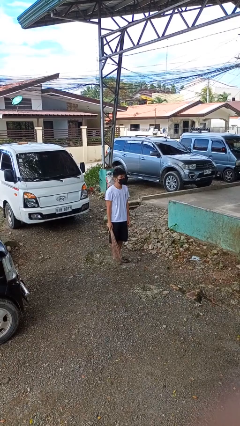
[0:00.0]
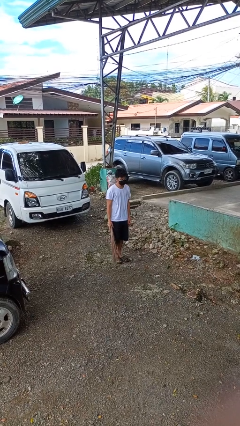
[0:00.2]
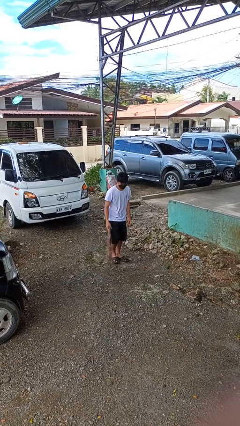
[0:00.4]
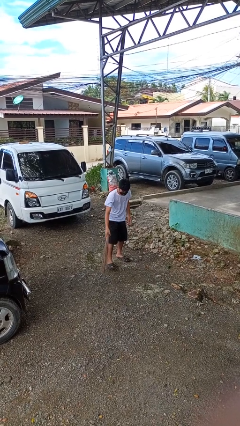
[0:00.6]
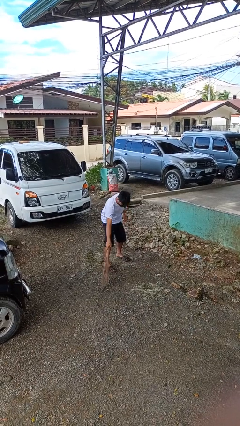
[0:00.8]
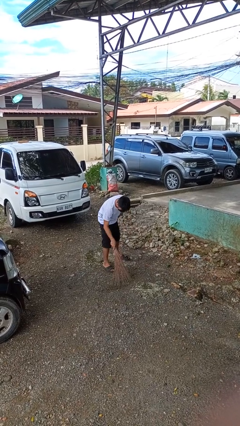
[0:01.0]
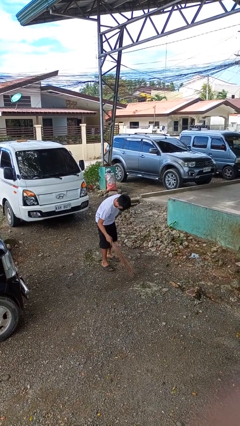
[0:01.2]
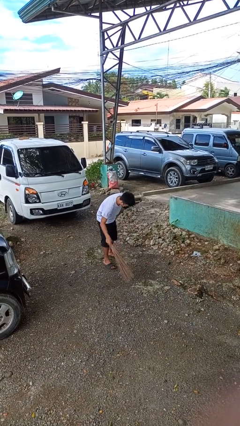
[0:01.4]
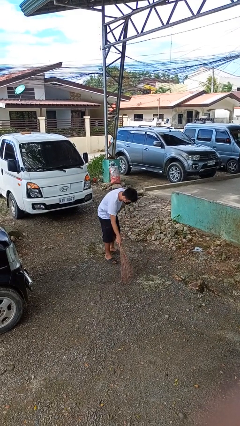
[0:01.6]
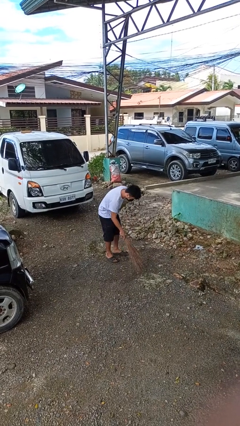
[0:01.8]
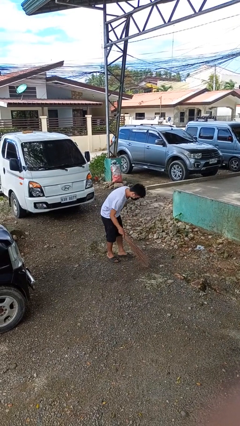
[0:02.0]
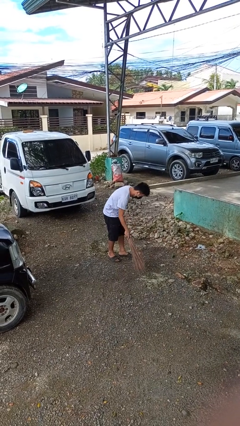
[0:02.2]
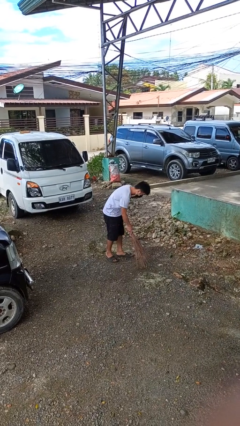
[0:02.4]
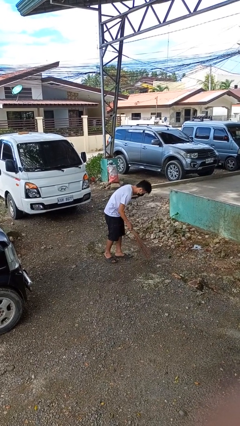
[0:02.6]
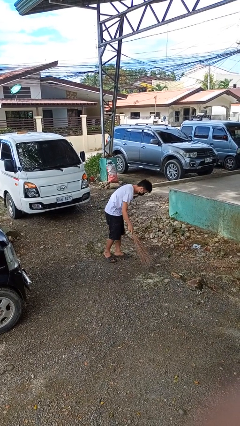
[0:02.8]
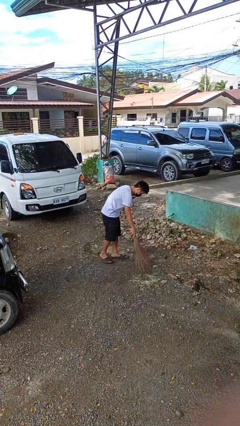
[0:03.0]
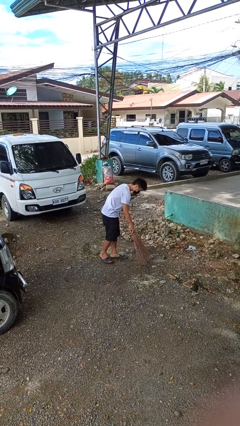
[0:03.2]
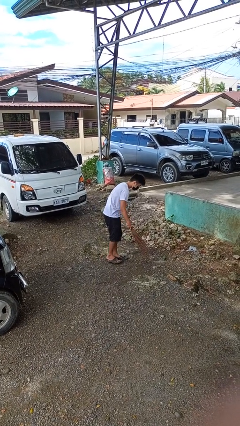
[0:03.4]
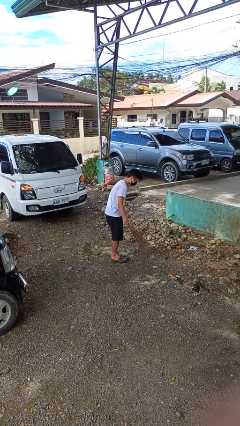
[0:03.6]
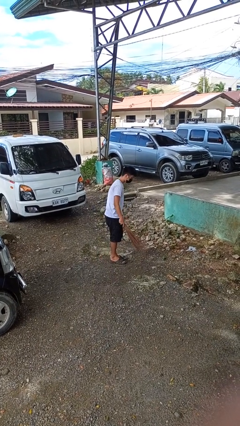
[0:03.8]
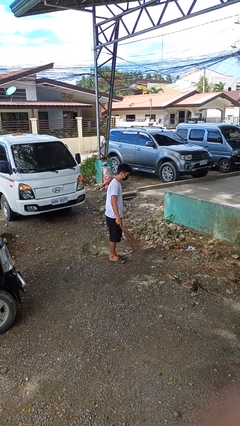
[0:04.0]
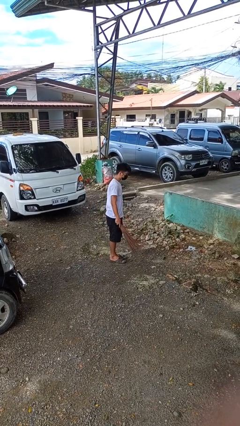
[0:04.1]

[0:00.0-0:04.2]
person sweeps floor

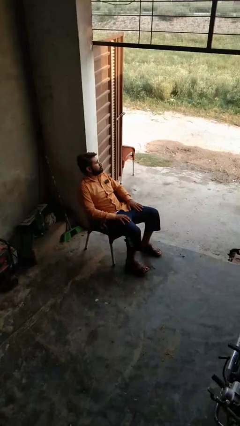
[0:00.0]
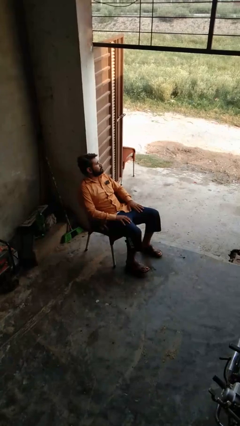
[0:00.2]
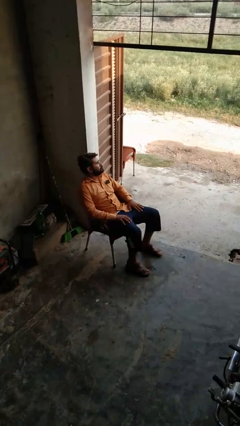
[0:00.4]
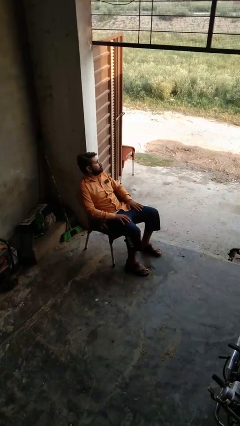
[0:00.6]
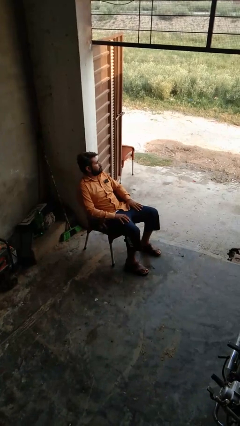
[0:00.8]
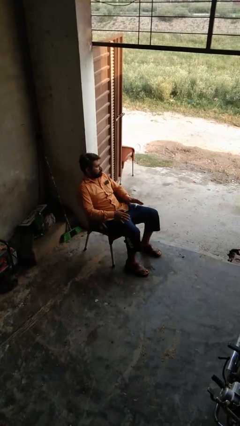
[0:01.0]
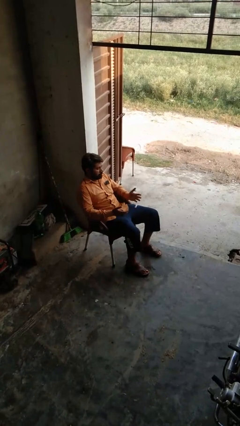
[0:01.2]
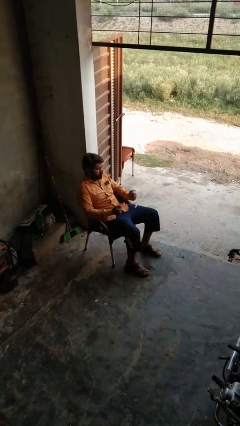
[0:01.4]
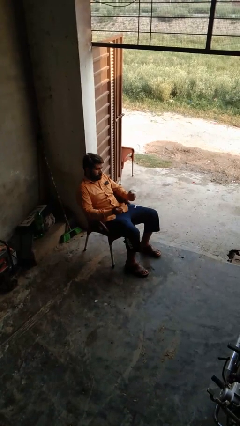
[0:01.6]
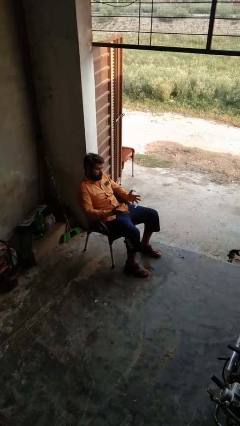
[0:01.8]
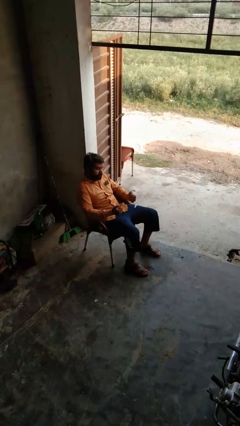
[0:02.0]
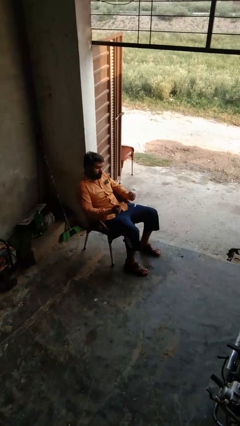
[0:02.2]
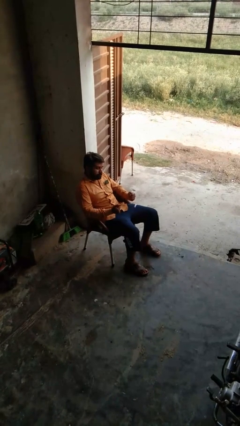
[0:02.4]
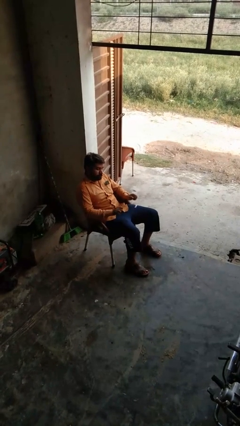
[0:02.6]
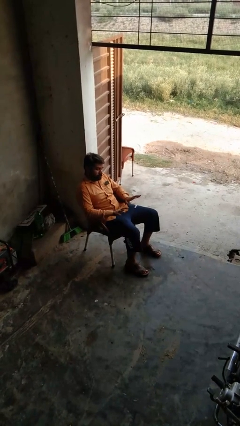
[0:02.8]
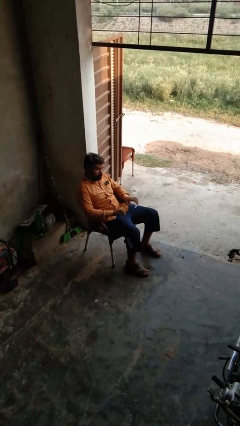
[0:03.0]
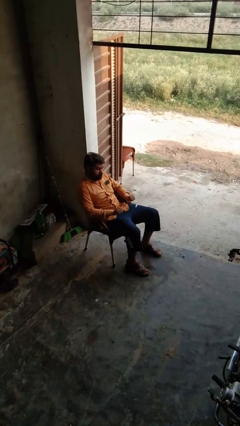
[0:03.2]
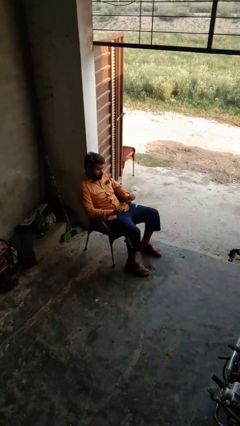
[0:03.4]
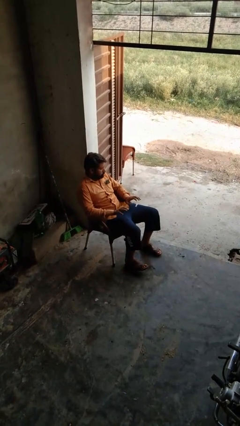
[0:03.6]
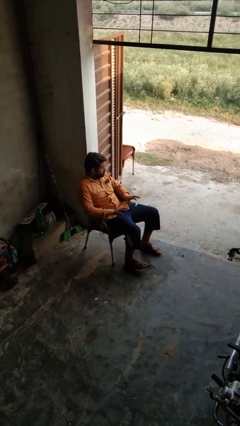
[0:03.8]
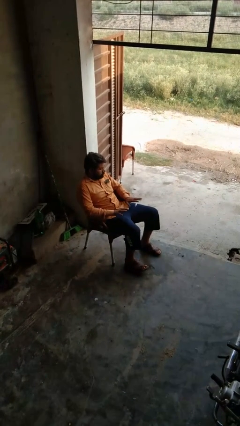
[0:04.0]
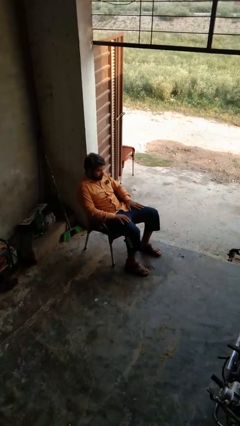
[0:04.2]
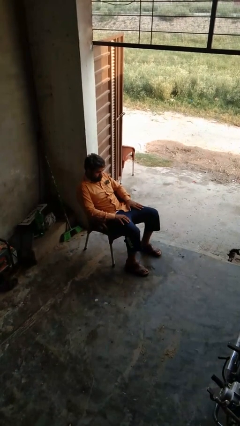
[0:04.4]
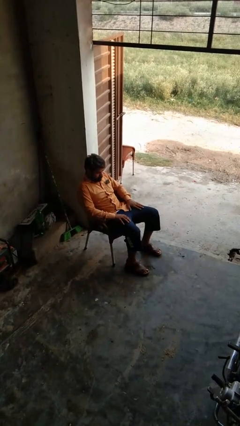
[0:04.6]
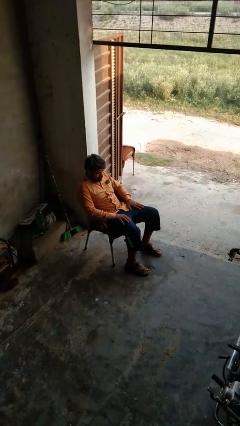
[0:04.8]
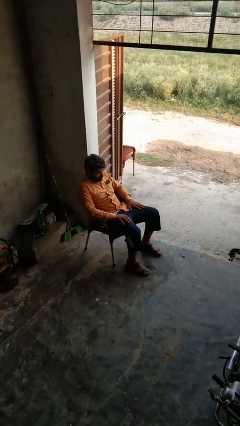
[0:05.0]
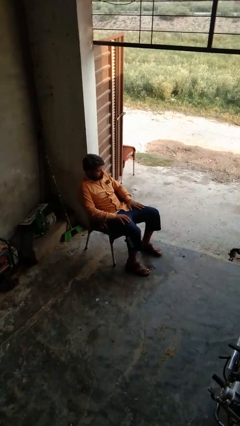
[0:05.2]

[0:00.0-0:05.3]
person looks at hands in lap

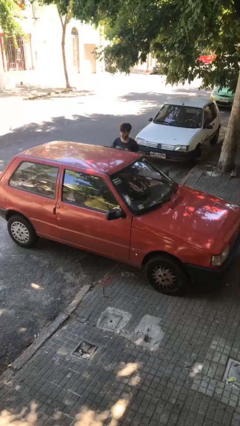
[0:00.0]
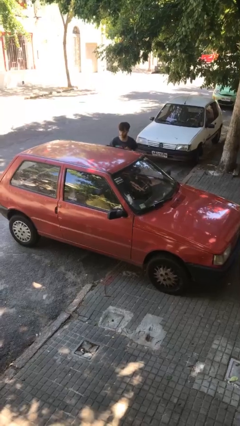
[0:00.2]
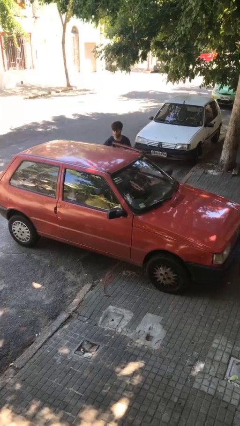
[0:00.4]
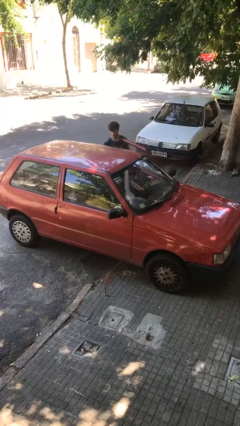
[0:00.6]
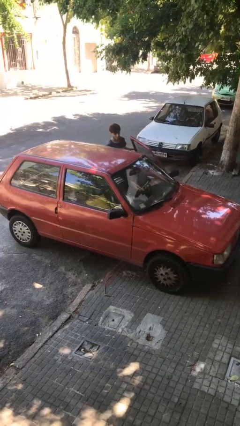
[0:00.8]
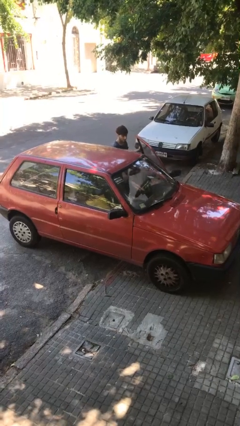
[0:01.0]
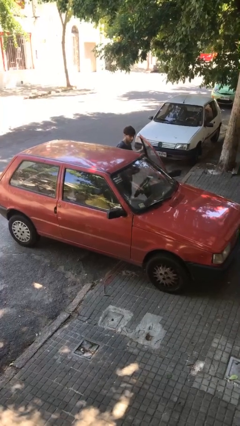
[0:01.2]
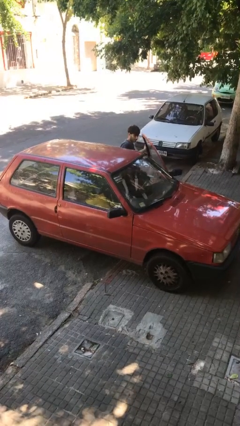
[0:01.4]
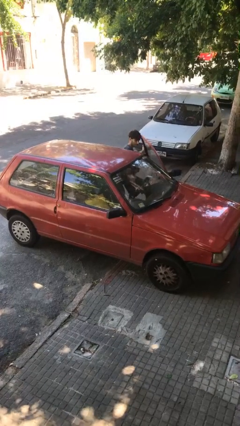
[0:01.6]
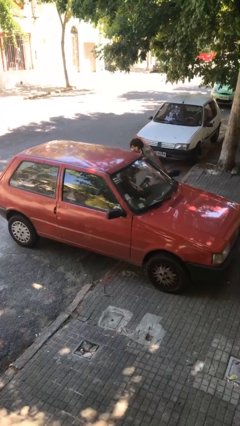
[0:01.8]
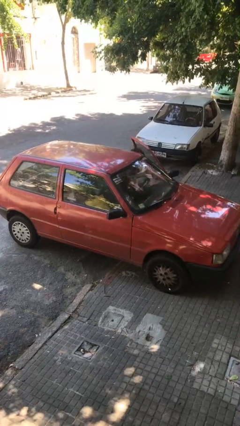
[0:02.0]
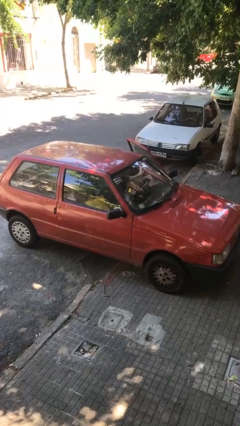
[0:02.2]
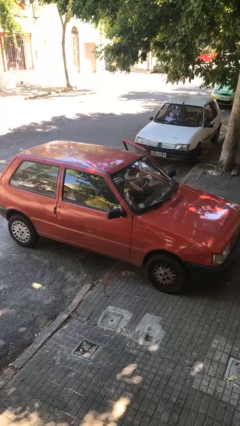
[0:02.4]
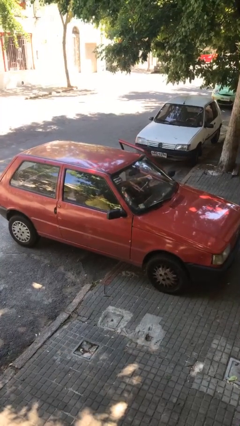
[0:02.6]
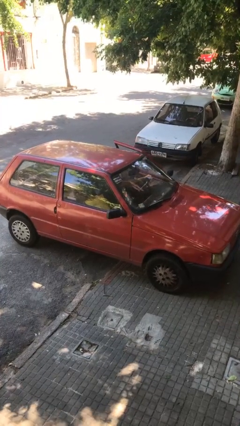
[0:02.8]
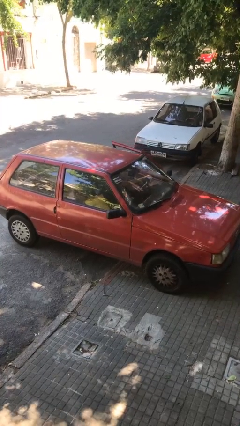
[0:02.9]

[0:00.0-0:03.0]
car picks up person

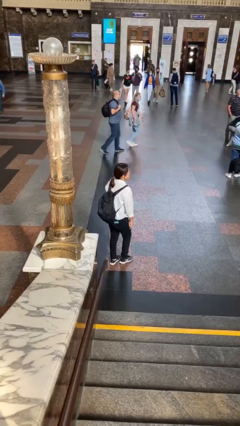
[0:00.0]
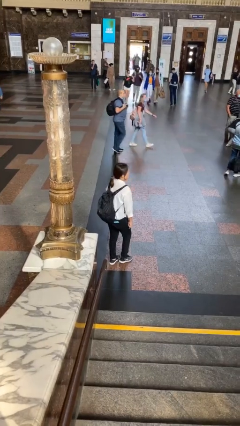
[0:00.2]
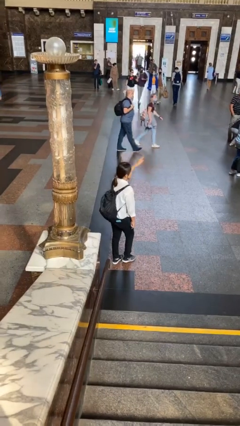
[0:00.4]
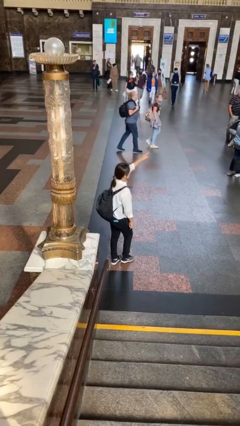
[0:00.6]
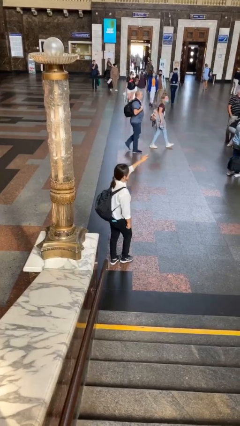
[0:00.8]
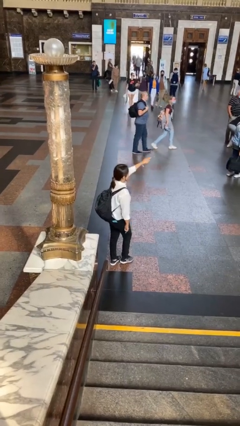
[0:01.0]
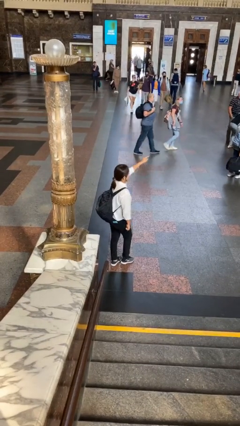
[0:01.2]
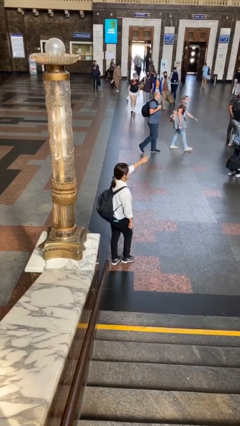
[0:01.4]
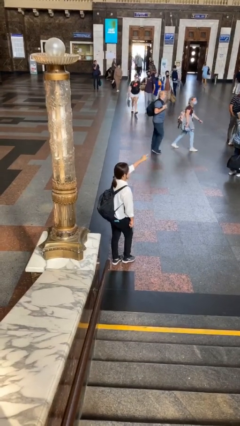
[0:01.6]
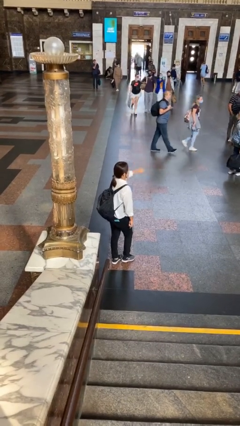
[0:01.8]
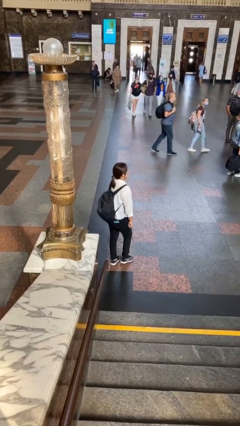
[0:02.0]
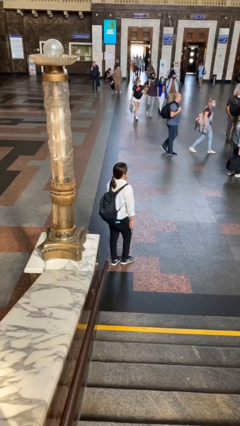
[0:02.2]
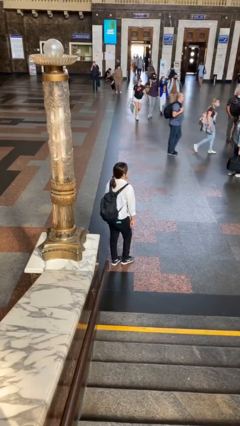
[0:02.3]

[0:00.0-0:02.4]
person points at person

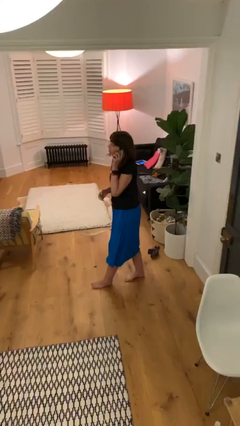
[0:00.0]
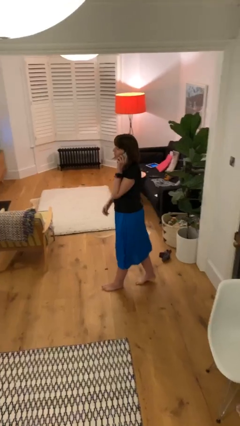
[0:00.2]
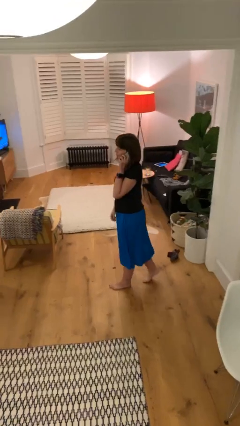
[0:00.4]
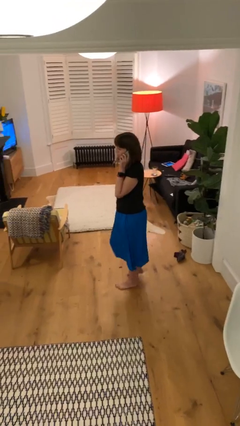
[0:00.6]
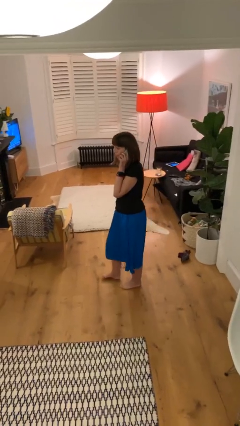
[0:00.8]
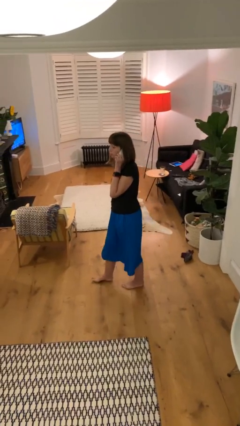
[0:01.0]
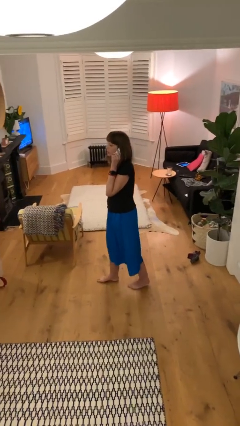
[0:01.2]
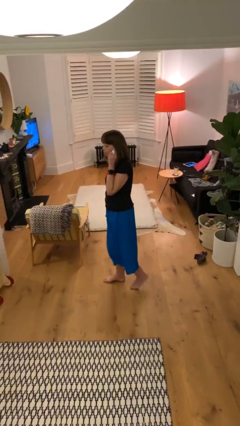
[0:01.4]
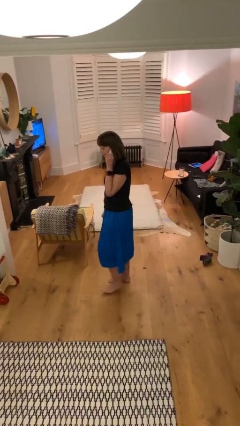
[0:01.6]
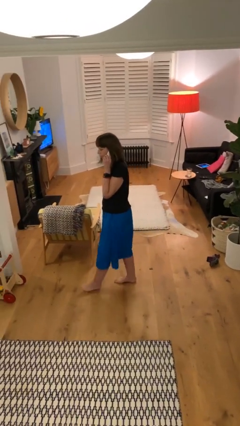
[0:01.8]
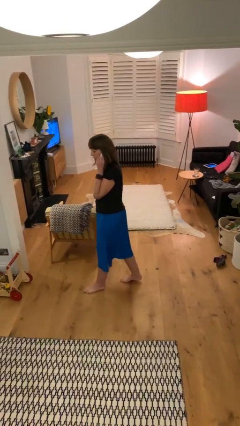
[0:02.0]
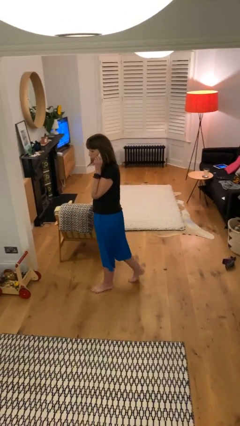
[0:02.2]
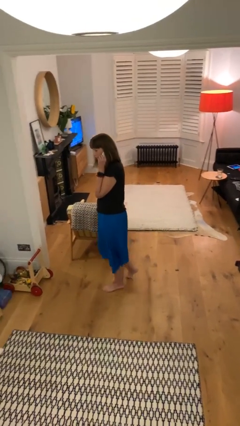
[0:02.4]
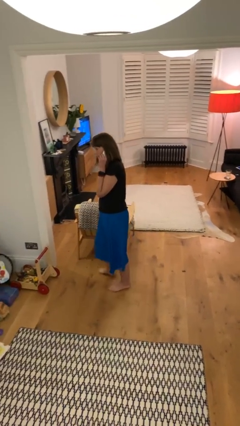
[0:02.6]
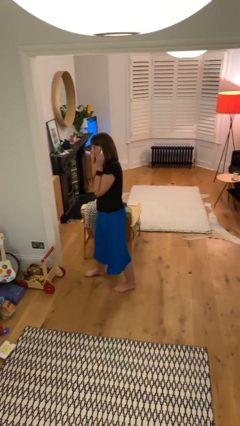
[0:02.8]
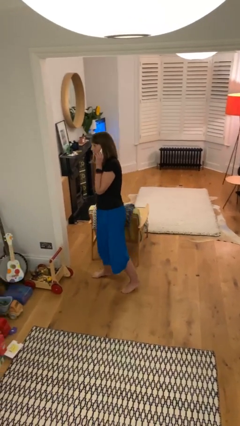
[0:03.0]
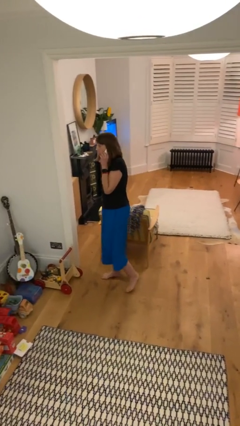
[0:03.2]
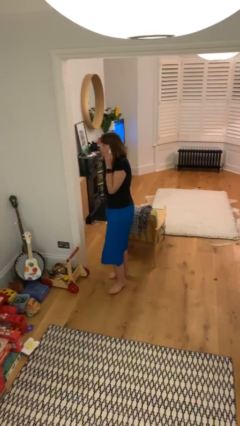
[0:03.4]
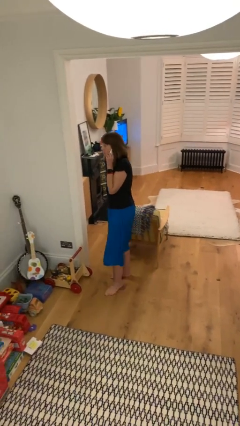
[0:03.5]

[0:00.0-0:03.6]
person talks on phone
